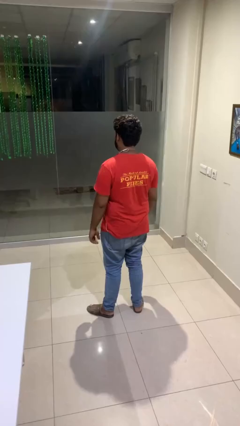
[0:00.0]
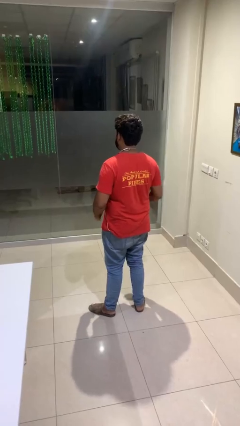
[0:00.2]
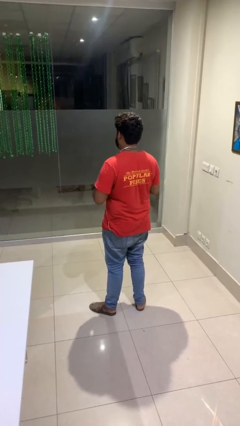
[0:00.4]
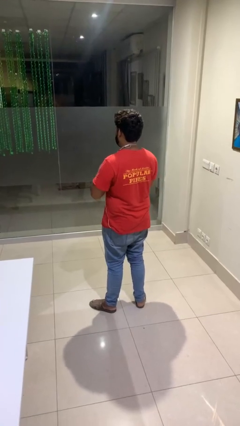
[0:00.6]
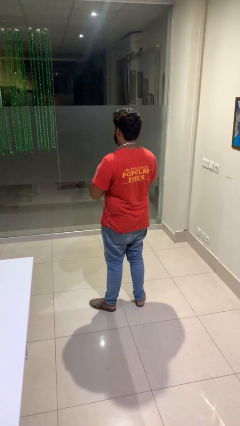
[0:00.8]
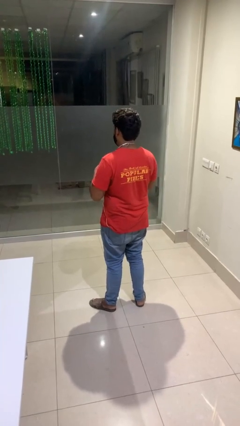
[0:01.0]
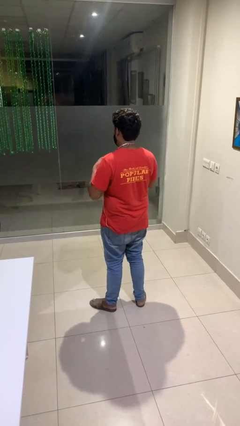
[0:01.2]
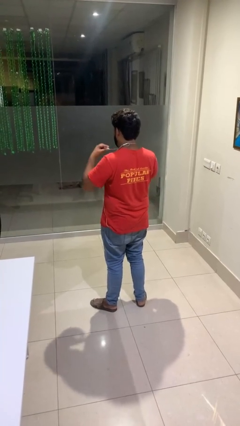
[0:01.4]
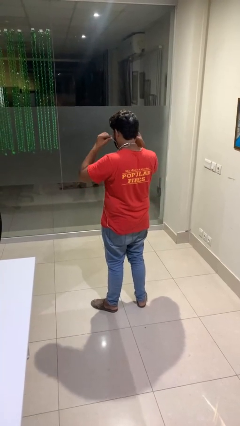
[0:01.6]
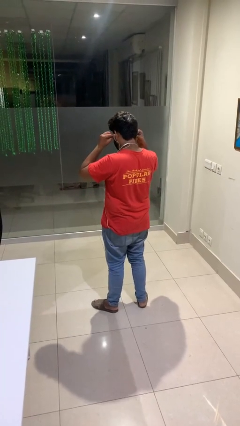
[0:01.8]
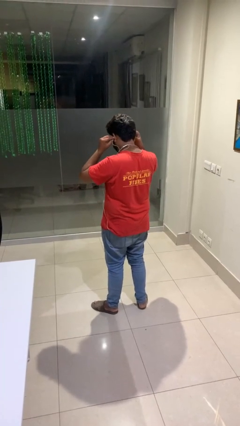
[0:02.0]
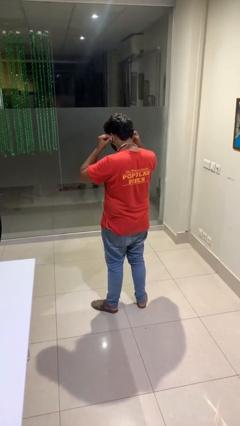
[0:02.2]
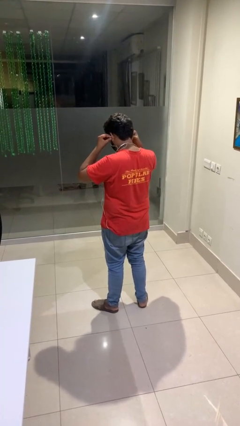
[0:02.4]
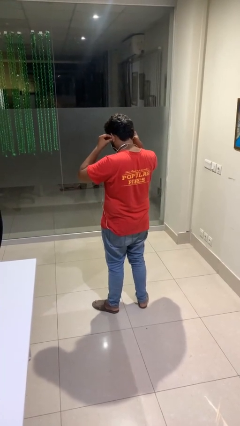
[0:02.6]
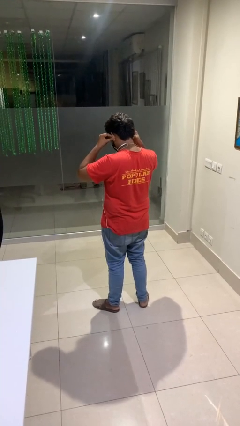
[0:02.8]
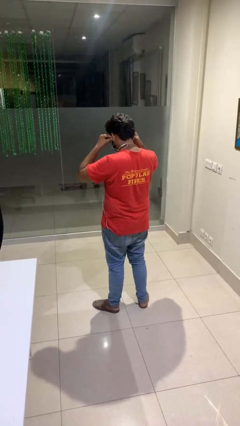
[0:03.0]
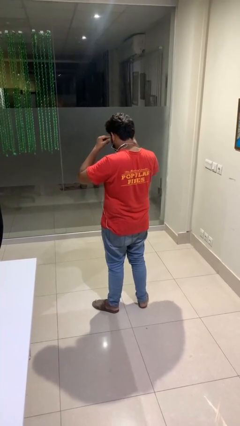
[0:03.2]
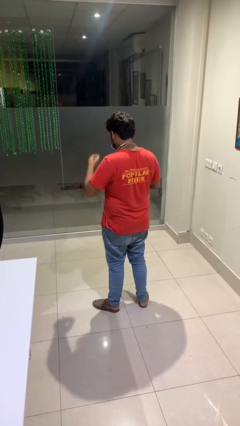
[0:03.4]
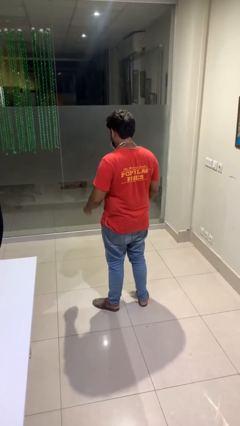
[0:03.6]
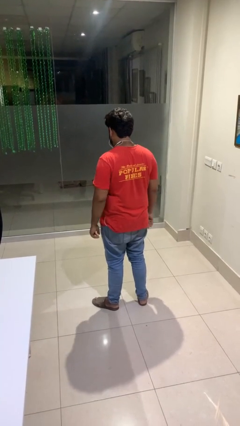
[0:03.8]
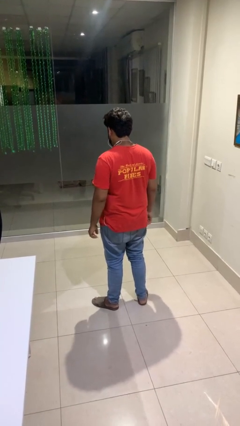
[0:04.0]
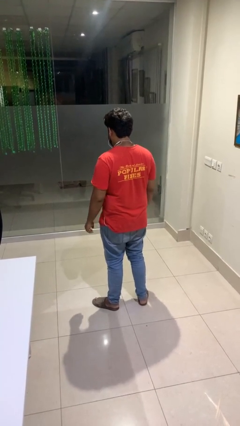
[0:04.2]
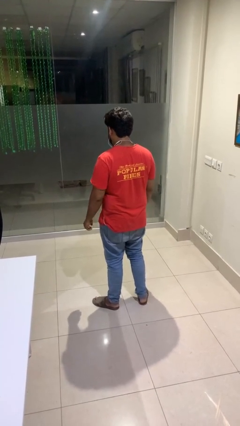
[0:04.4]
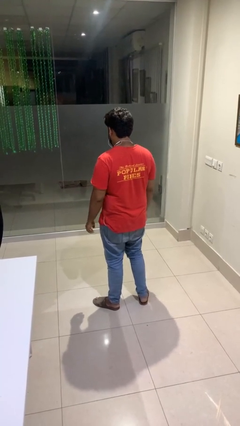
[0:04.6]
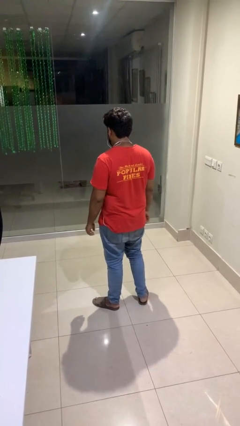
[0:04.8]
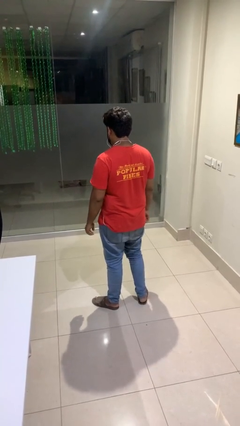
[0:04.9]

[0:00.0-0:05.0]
person puts on headphones

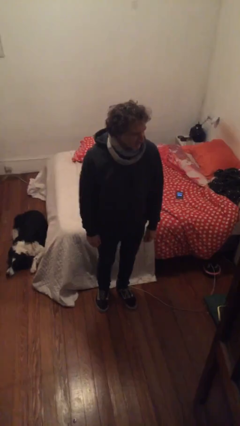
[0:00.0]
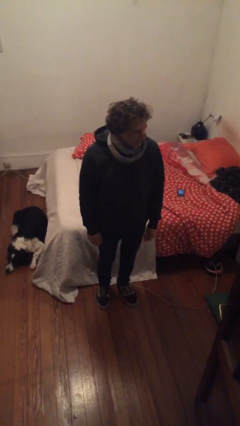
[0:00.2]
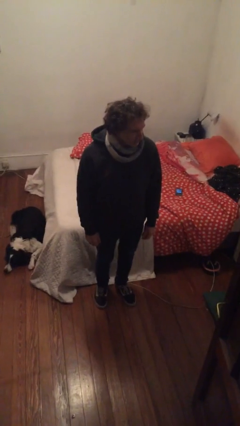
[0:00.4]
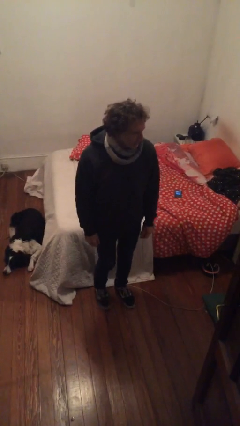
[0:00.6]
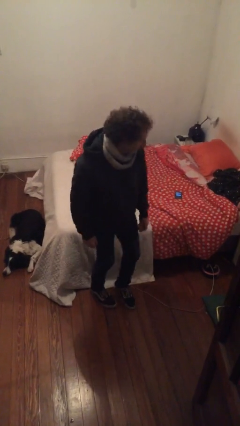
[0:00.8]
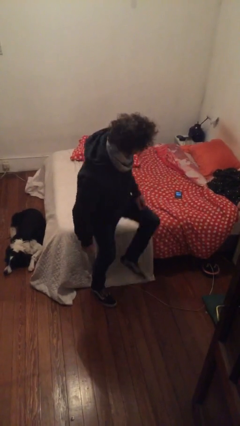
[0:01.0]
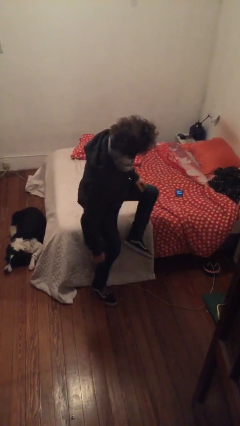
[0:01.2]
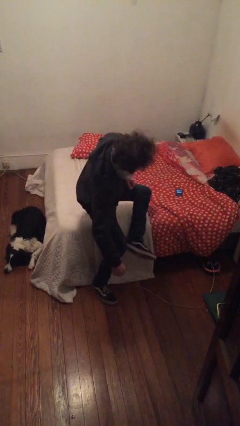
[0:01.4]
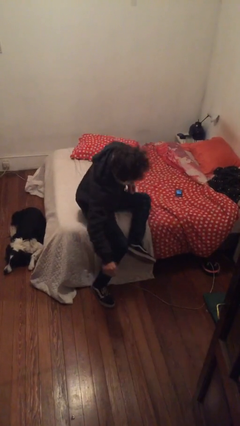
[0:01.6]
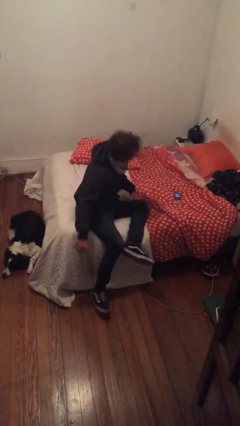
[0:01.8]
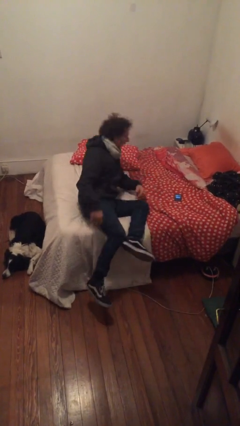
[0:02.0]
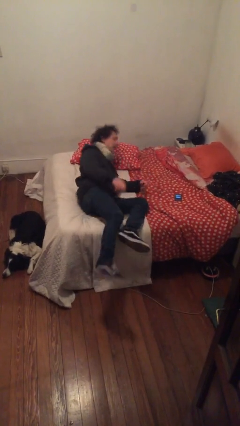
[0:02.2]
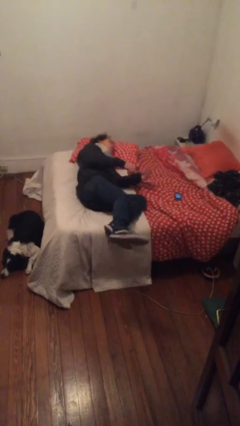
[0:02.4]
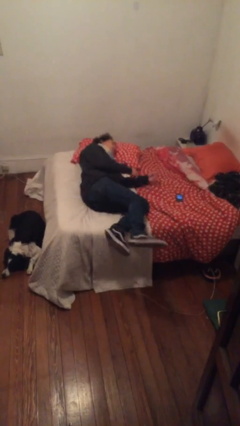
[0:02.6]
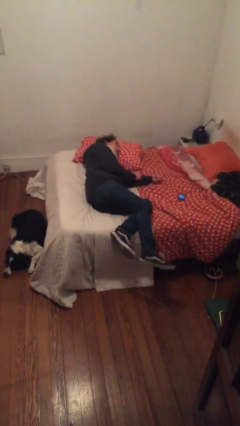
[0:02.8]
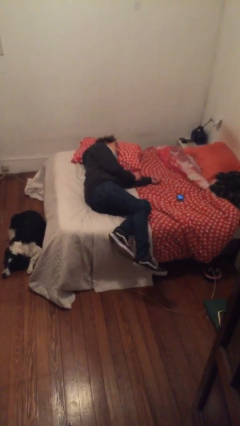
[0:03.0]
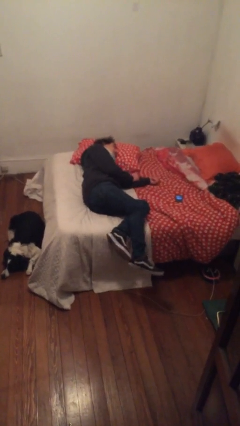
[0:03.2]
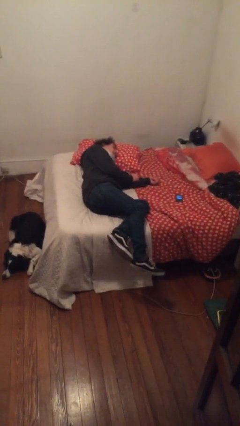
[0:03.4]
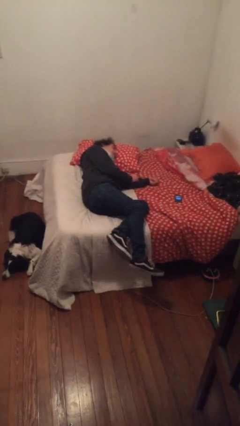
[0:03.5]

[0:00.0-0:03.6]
person lies down on bed

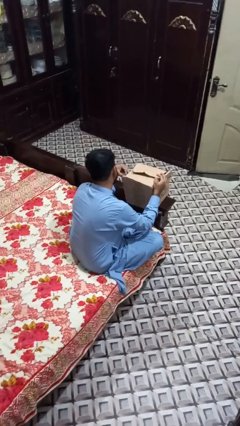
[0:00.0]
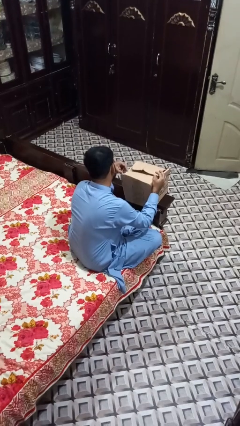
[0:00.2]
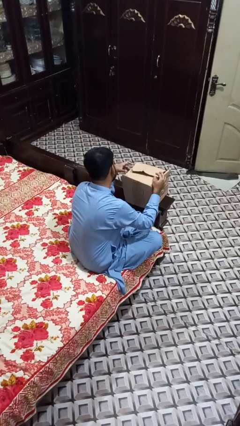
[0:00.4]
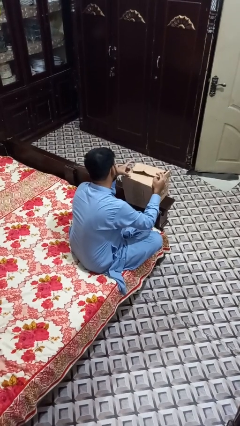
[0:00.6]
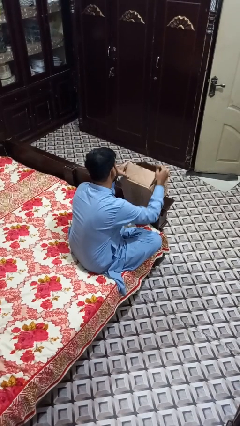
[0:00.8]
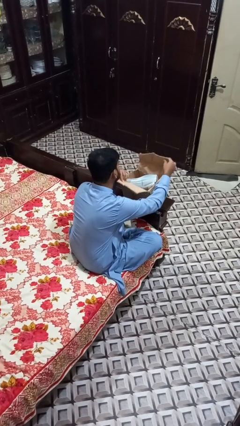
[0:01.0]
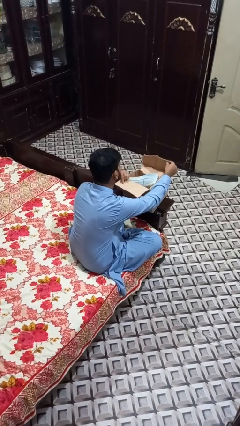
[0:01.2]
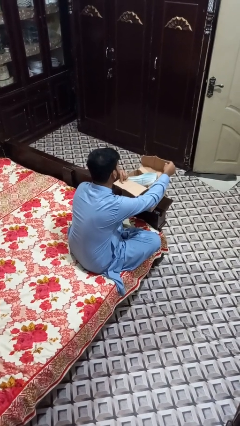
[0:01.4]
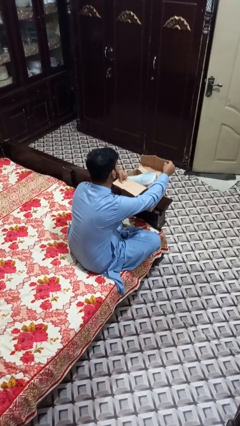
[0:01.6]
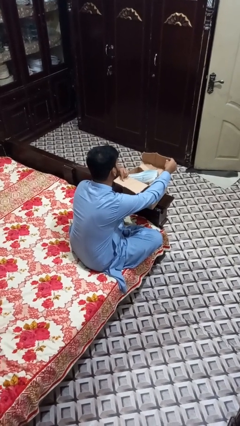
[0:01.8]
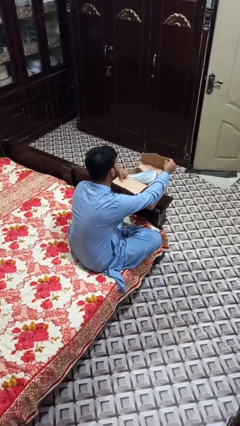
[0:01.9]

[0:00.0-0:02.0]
person opens box

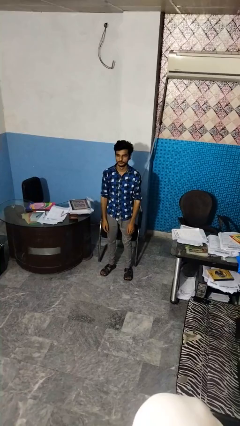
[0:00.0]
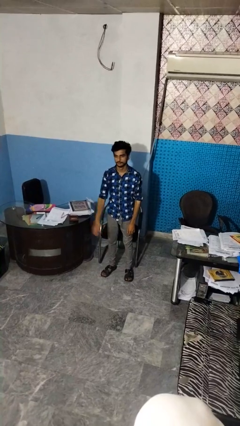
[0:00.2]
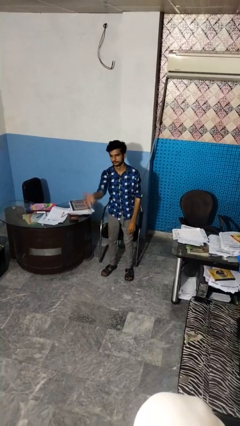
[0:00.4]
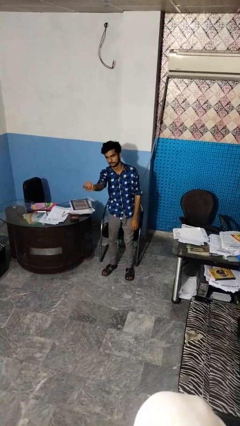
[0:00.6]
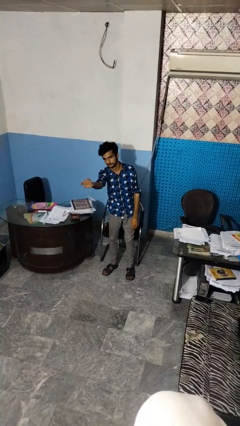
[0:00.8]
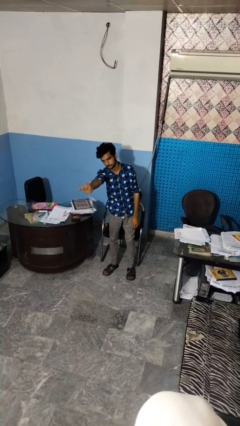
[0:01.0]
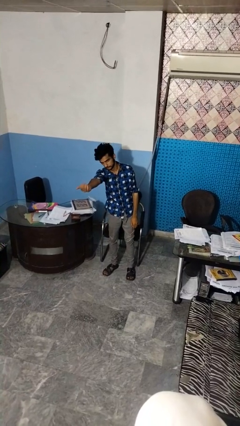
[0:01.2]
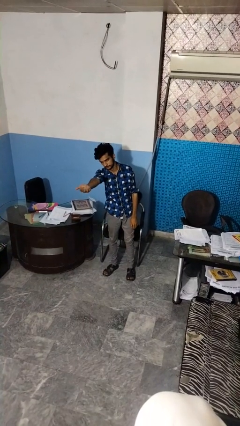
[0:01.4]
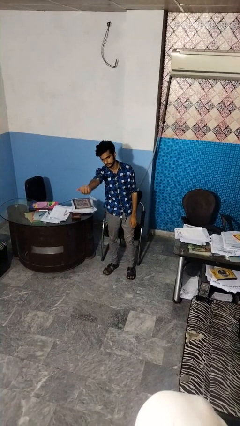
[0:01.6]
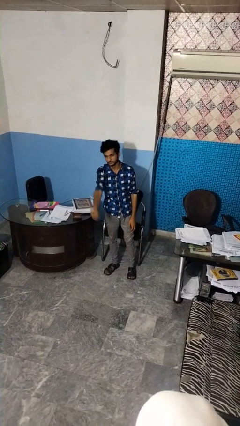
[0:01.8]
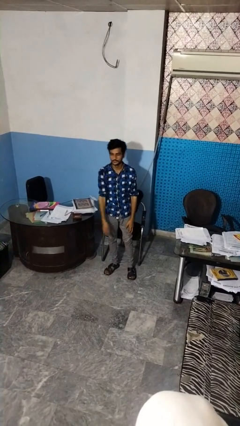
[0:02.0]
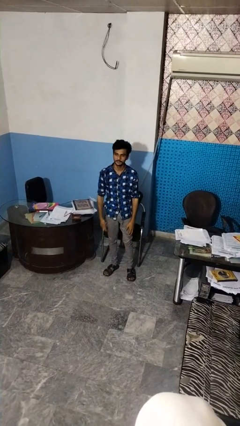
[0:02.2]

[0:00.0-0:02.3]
person gestures come here

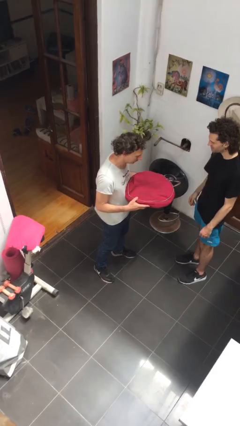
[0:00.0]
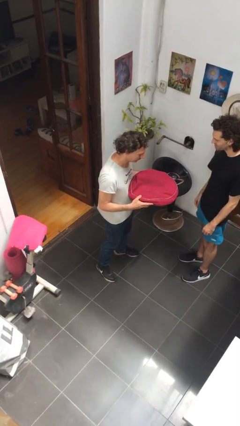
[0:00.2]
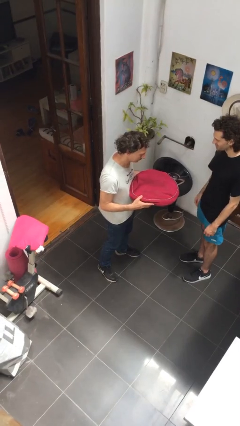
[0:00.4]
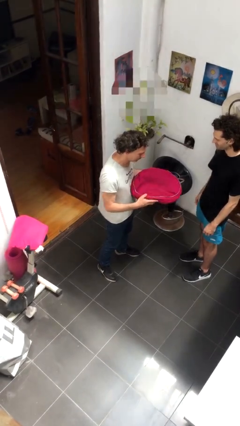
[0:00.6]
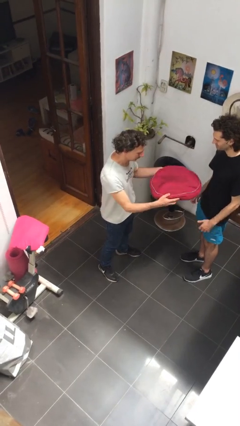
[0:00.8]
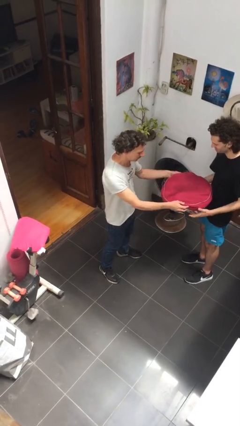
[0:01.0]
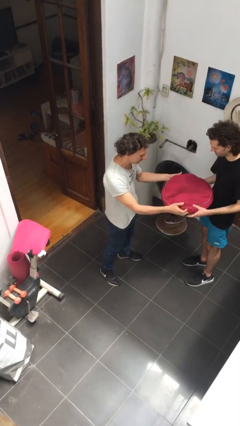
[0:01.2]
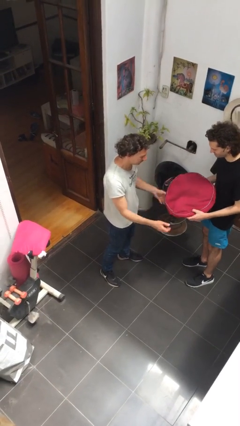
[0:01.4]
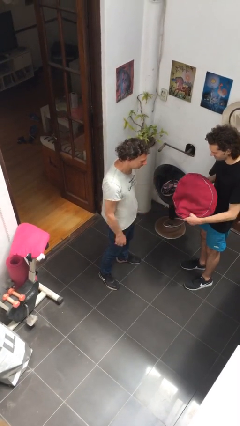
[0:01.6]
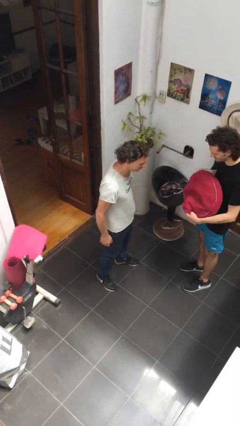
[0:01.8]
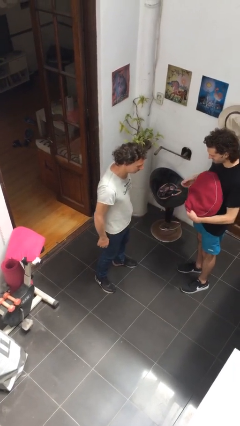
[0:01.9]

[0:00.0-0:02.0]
person transfers object to person

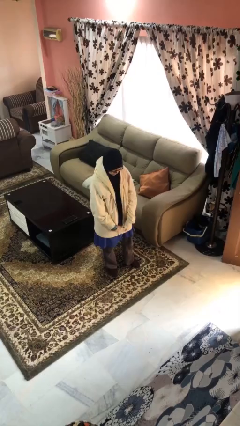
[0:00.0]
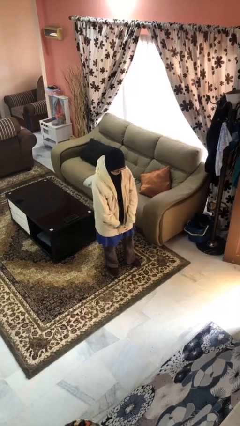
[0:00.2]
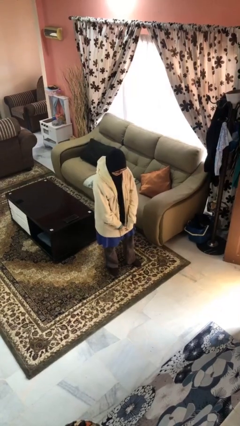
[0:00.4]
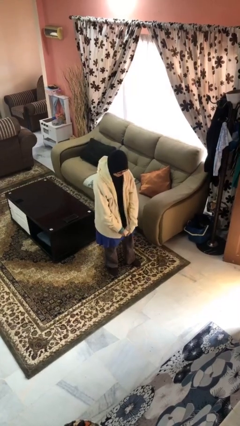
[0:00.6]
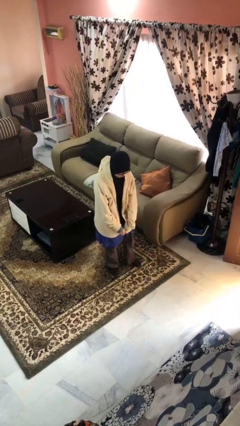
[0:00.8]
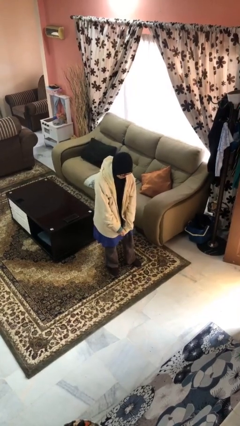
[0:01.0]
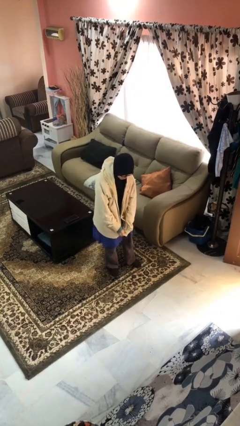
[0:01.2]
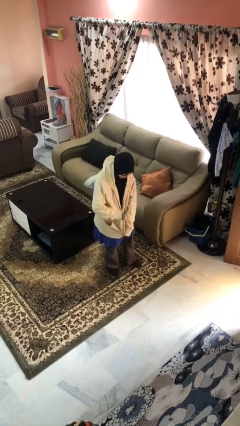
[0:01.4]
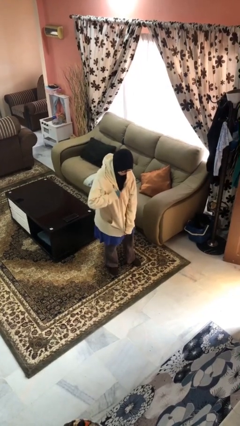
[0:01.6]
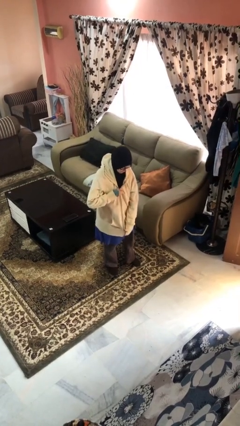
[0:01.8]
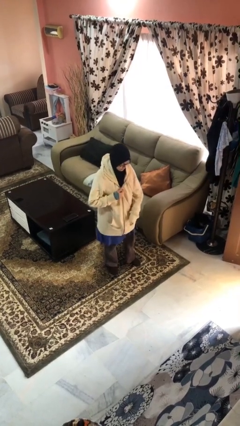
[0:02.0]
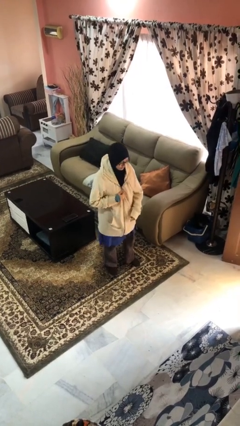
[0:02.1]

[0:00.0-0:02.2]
person zips up jacket

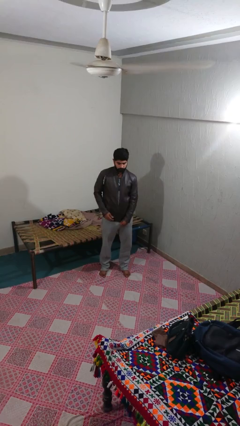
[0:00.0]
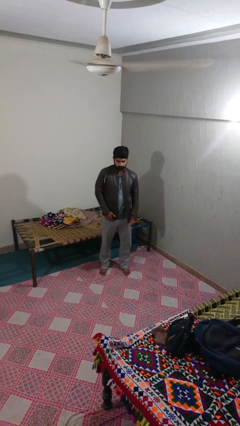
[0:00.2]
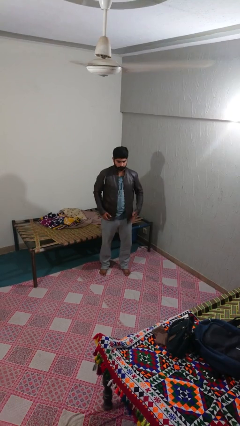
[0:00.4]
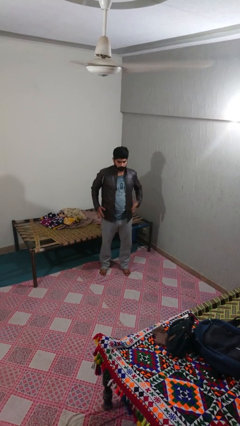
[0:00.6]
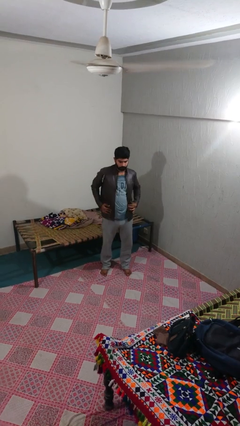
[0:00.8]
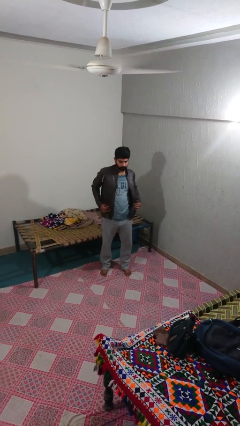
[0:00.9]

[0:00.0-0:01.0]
person unzips jacket
